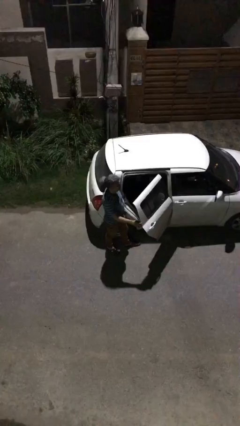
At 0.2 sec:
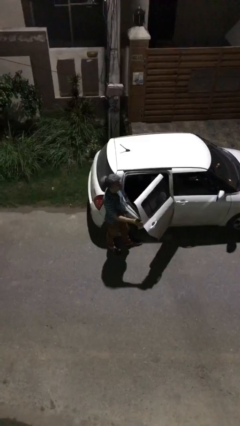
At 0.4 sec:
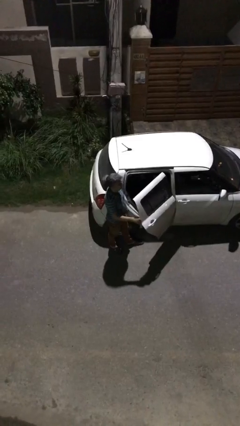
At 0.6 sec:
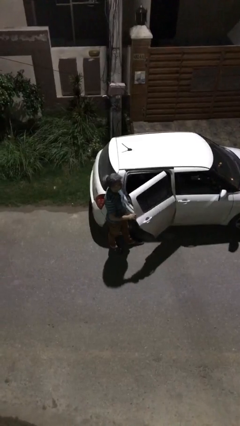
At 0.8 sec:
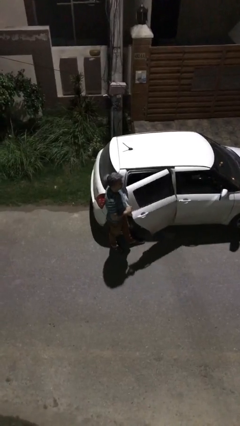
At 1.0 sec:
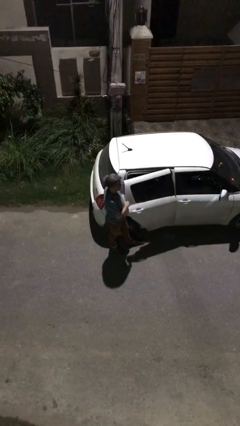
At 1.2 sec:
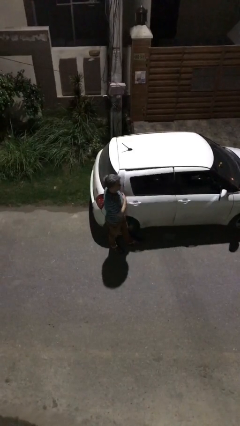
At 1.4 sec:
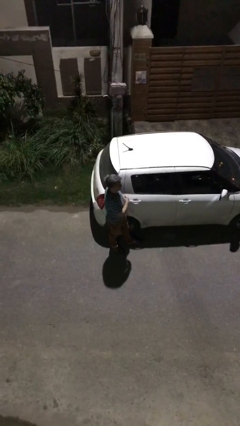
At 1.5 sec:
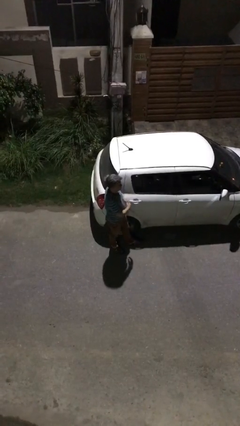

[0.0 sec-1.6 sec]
person closes car door

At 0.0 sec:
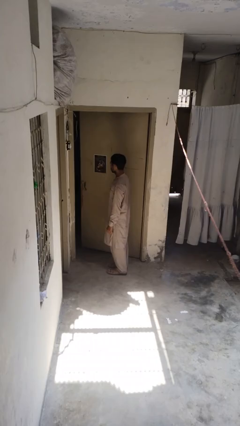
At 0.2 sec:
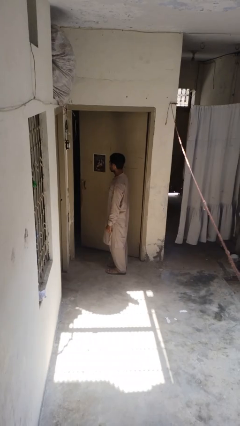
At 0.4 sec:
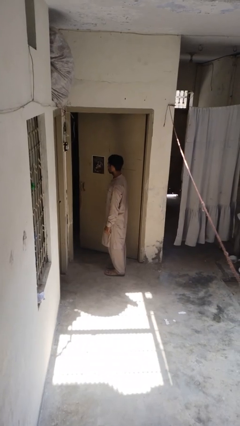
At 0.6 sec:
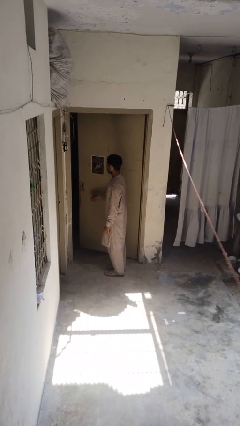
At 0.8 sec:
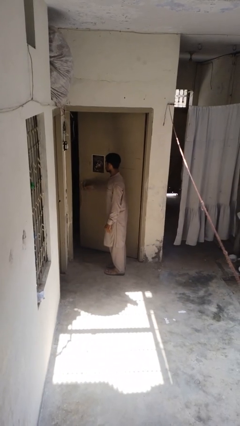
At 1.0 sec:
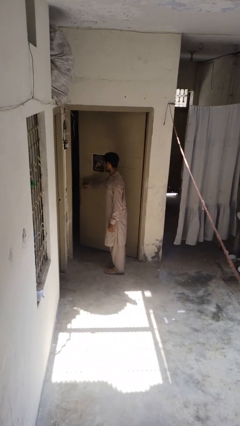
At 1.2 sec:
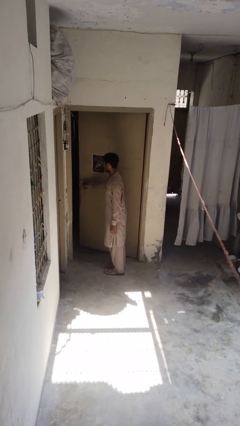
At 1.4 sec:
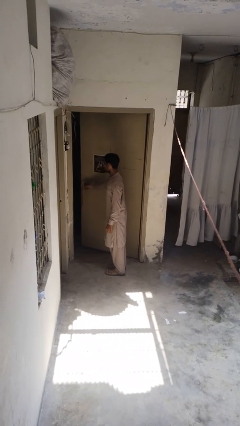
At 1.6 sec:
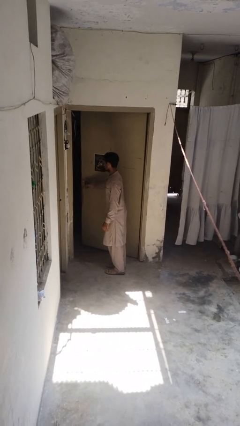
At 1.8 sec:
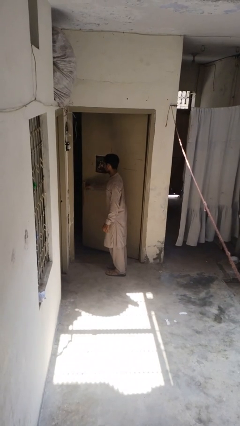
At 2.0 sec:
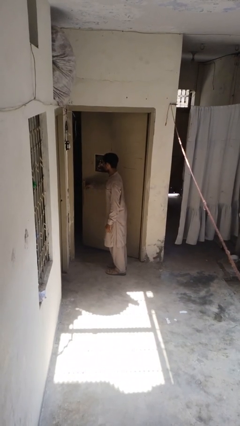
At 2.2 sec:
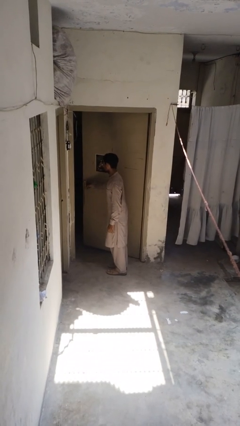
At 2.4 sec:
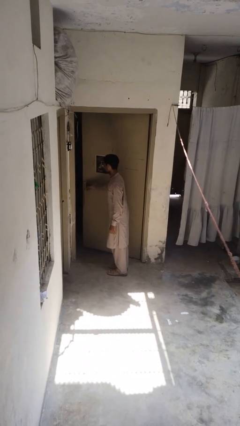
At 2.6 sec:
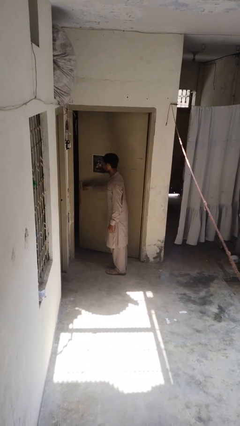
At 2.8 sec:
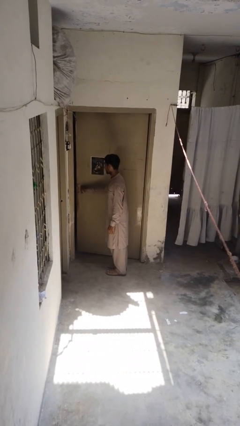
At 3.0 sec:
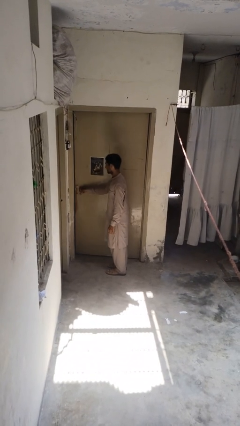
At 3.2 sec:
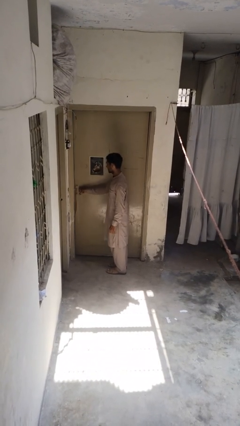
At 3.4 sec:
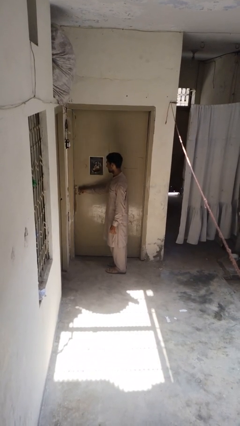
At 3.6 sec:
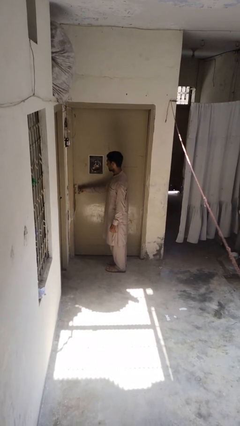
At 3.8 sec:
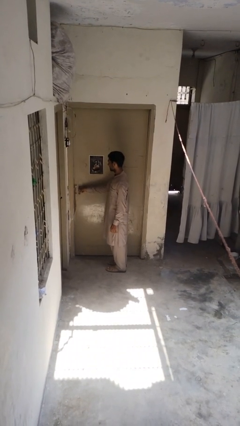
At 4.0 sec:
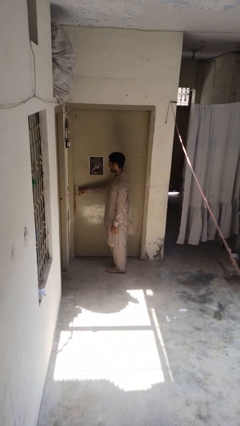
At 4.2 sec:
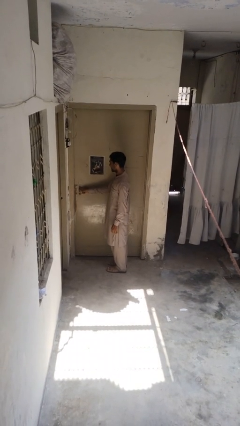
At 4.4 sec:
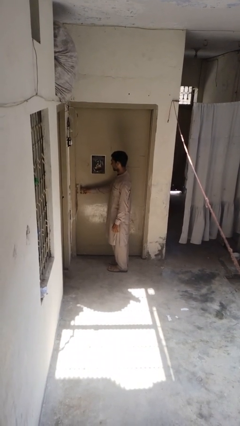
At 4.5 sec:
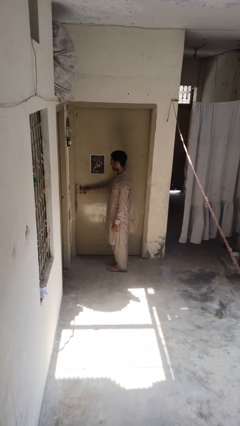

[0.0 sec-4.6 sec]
person closes door with foot

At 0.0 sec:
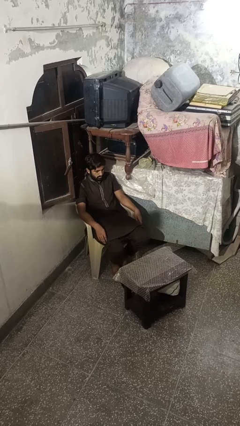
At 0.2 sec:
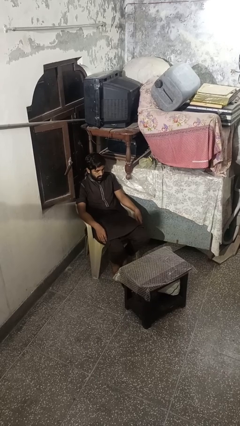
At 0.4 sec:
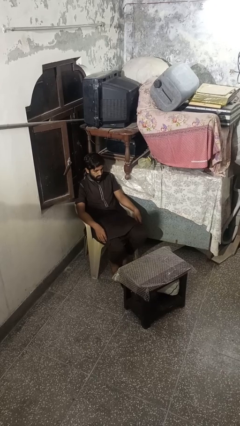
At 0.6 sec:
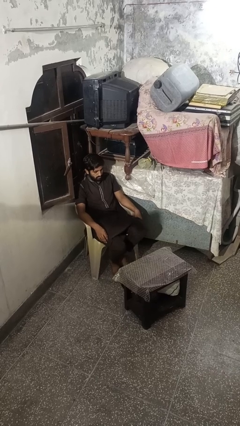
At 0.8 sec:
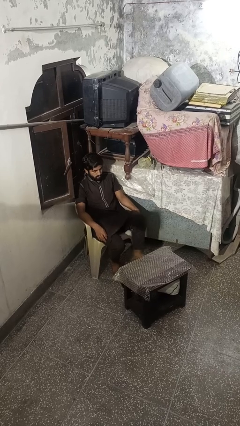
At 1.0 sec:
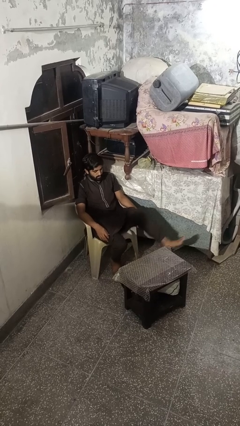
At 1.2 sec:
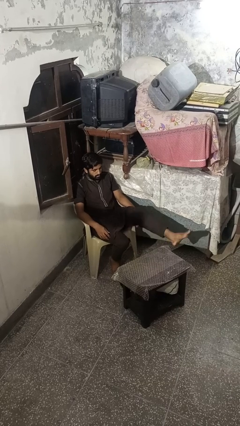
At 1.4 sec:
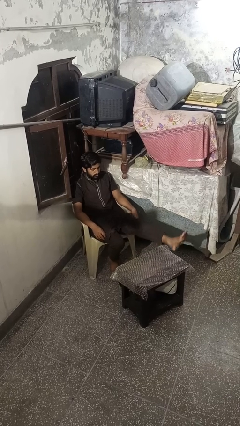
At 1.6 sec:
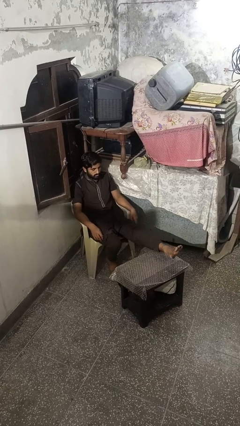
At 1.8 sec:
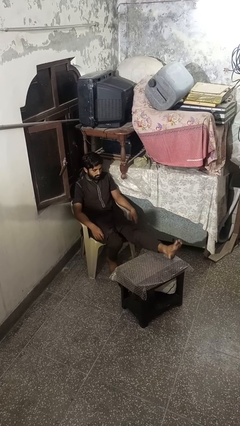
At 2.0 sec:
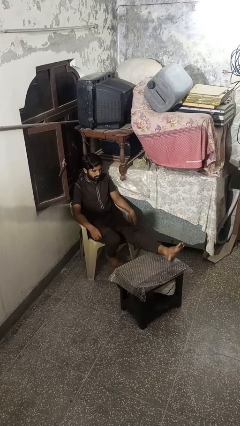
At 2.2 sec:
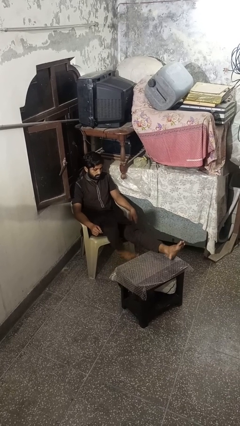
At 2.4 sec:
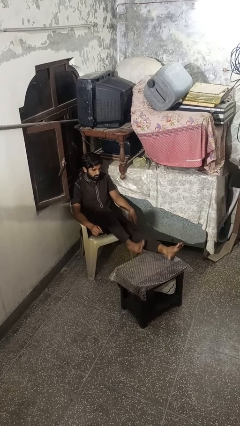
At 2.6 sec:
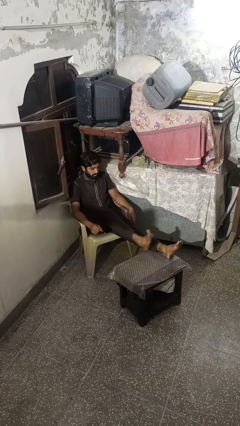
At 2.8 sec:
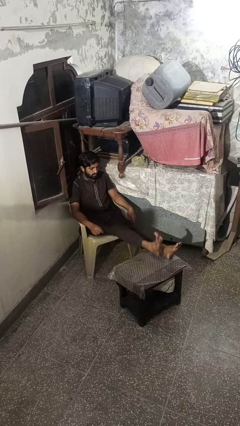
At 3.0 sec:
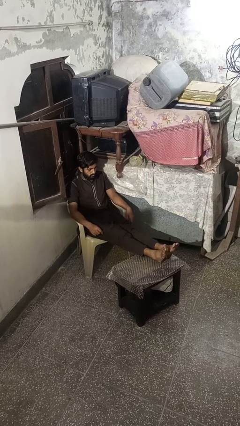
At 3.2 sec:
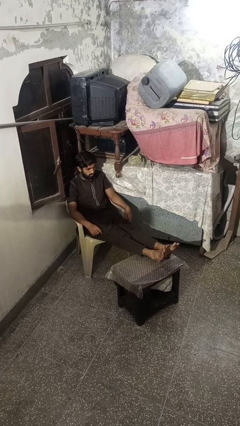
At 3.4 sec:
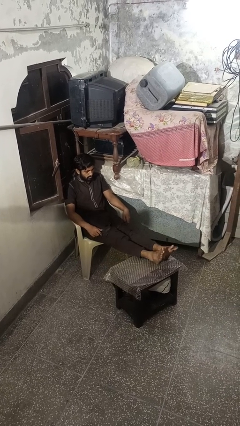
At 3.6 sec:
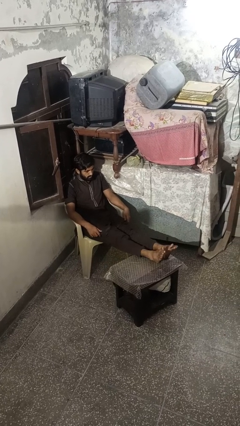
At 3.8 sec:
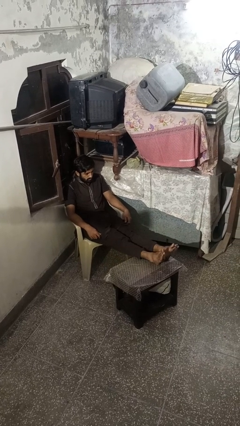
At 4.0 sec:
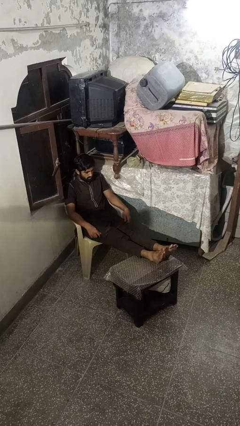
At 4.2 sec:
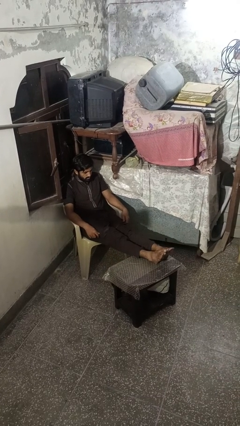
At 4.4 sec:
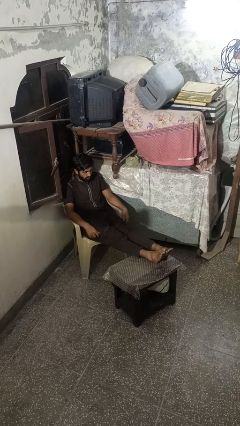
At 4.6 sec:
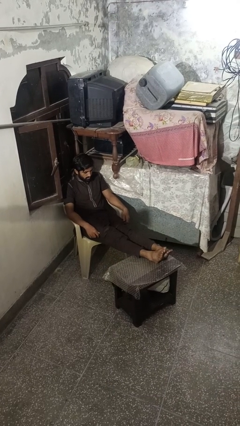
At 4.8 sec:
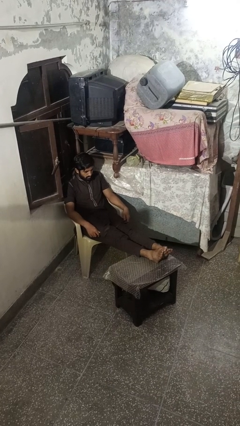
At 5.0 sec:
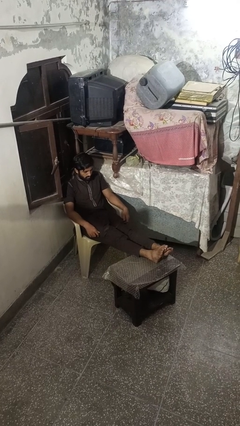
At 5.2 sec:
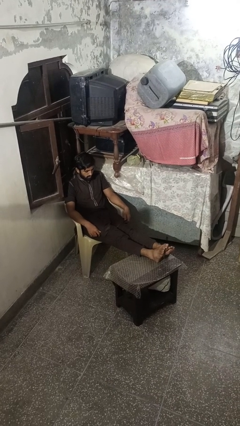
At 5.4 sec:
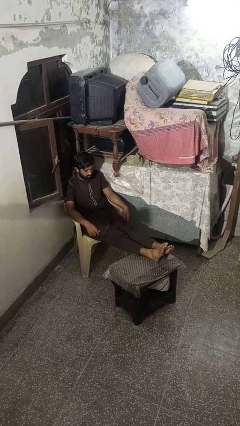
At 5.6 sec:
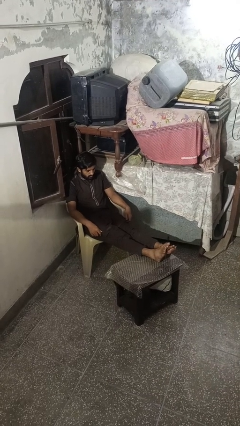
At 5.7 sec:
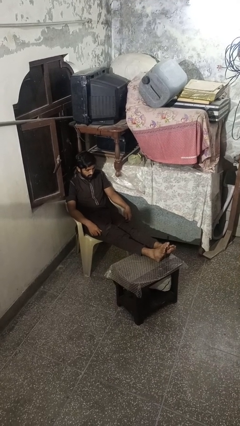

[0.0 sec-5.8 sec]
person puts feet up

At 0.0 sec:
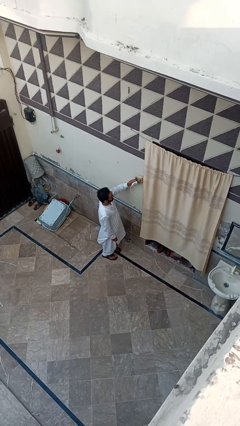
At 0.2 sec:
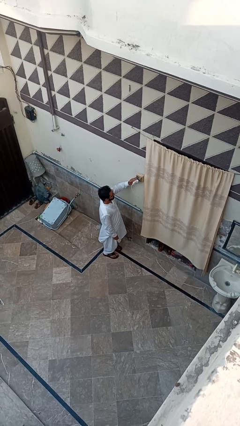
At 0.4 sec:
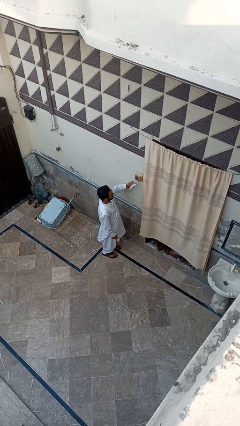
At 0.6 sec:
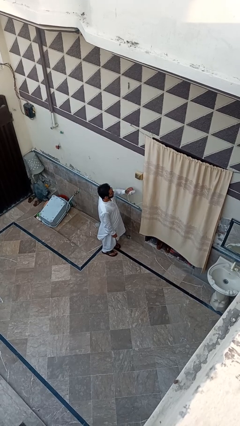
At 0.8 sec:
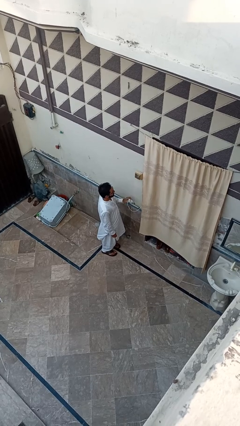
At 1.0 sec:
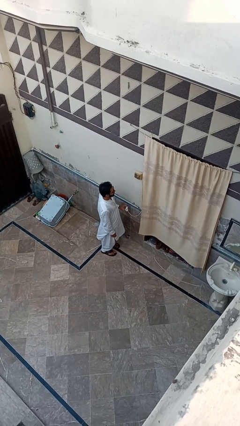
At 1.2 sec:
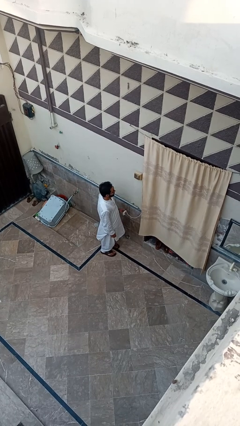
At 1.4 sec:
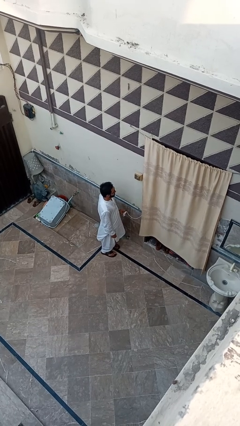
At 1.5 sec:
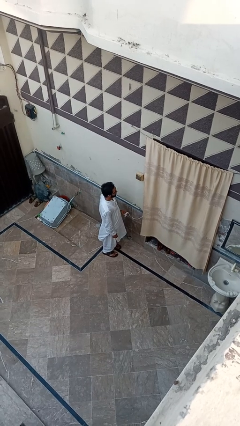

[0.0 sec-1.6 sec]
person unplugs from electrical socket

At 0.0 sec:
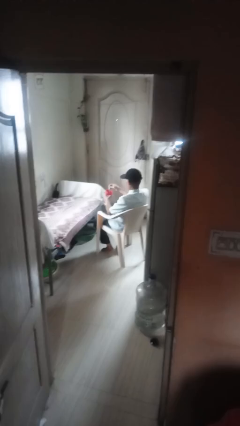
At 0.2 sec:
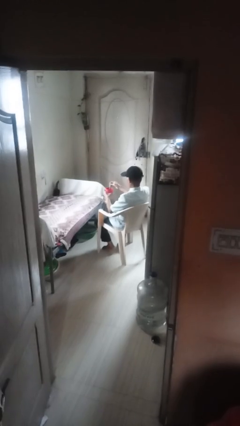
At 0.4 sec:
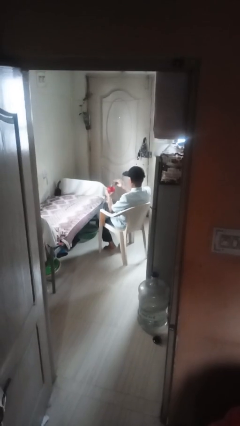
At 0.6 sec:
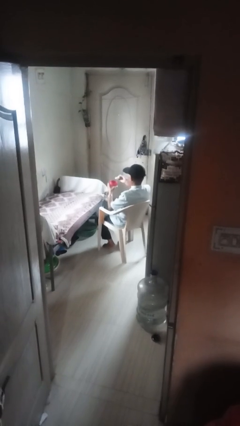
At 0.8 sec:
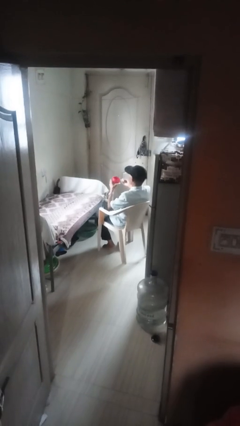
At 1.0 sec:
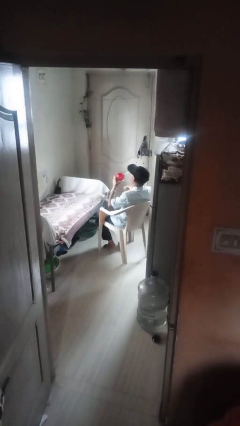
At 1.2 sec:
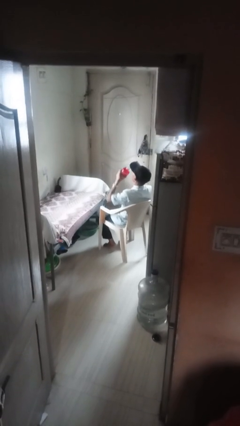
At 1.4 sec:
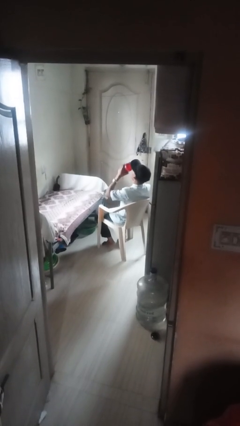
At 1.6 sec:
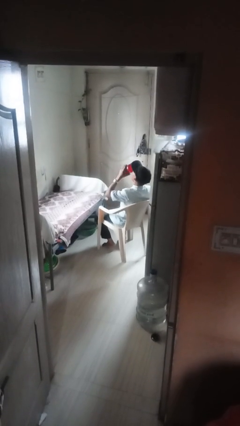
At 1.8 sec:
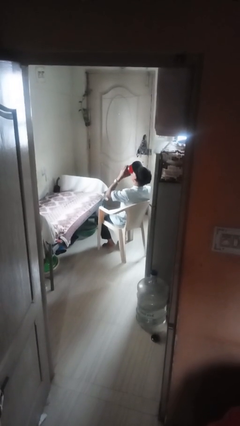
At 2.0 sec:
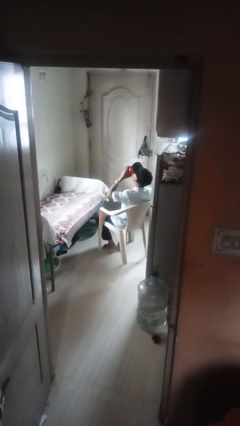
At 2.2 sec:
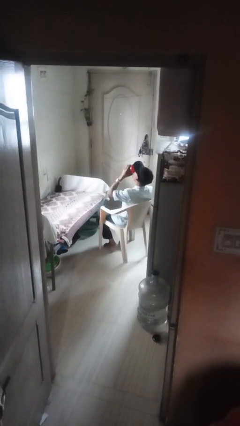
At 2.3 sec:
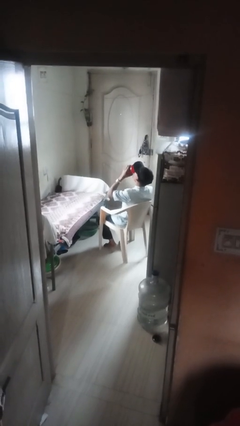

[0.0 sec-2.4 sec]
person drinks from mug

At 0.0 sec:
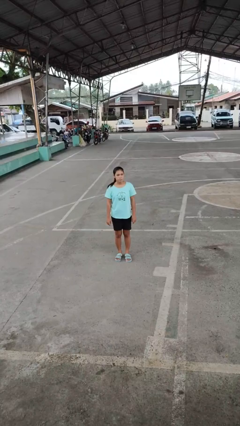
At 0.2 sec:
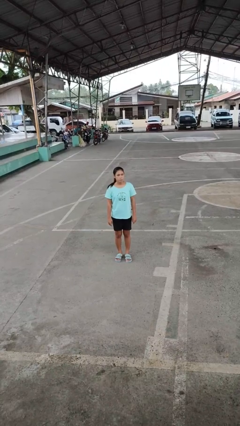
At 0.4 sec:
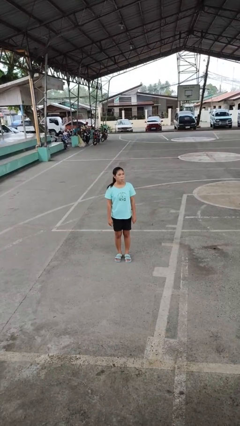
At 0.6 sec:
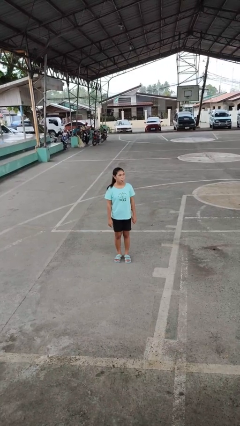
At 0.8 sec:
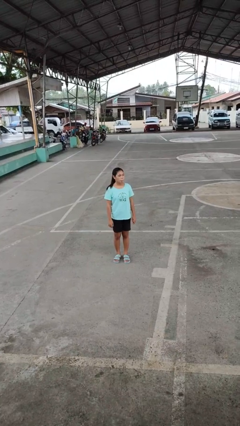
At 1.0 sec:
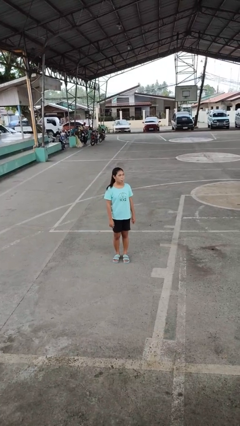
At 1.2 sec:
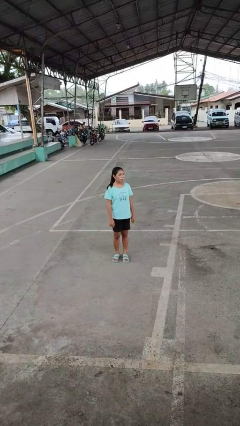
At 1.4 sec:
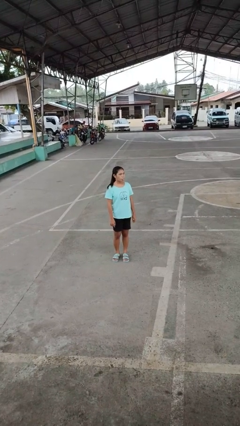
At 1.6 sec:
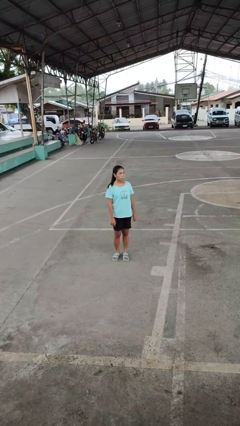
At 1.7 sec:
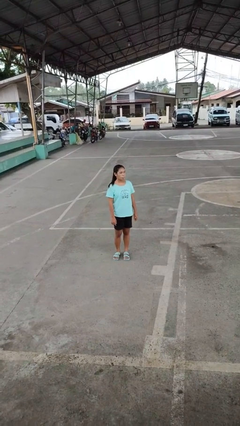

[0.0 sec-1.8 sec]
person sticks out tongue
